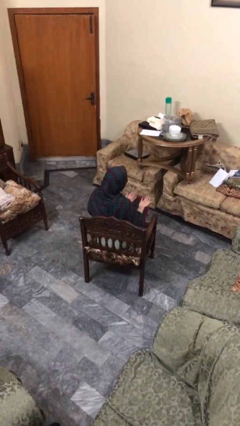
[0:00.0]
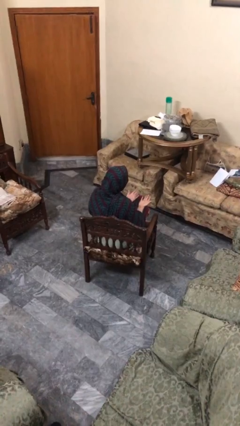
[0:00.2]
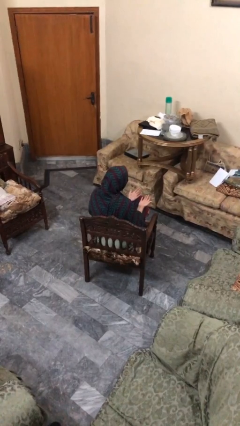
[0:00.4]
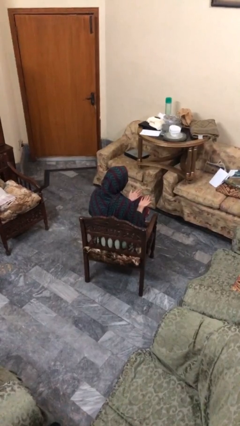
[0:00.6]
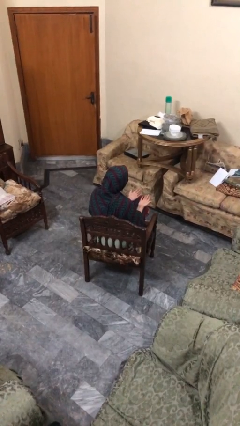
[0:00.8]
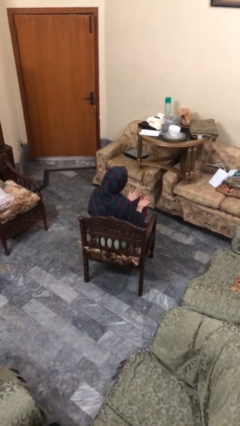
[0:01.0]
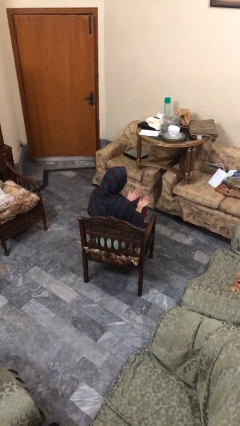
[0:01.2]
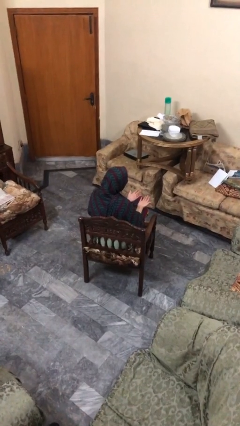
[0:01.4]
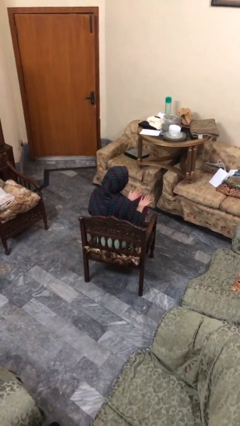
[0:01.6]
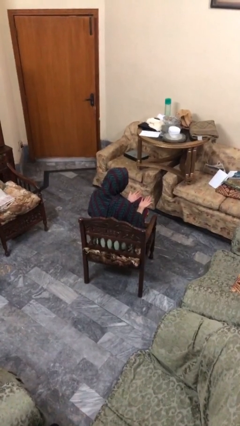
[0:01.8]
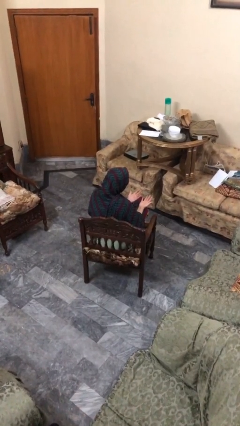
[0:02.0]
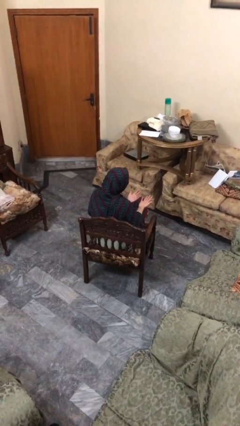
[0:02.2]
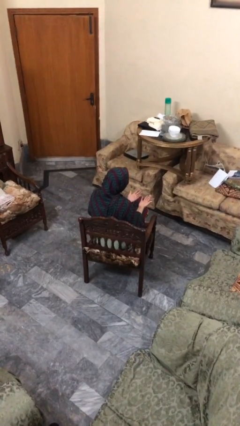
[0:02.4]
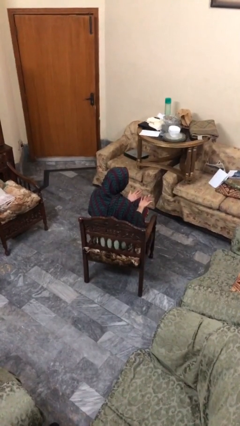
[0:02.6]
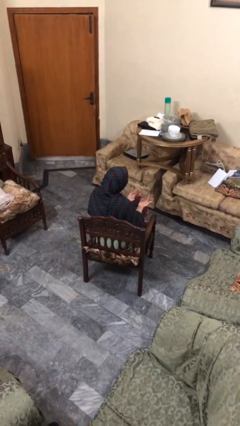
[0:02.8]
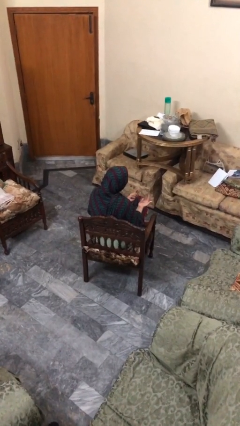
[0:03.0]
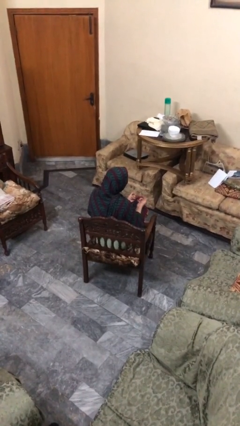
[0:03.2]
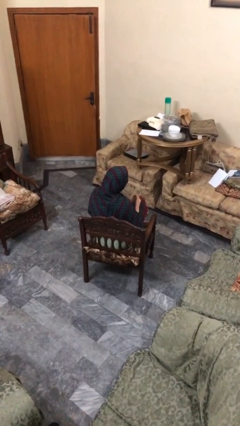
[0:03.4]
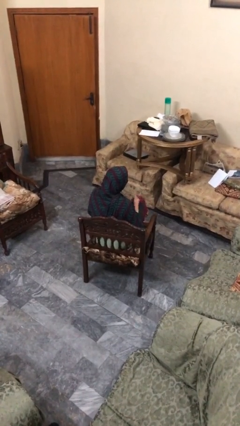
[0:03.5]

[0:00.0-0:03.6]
person looks at hands in lap

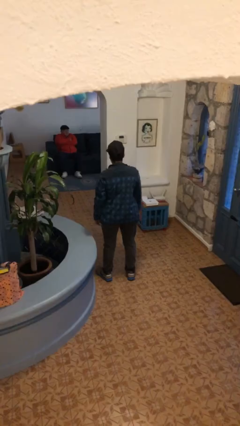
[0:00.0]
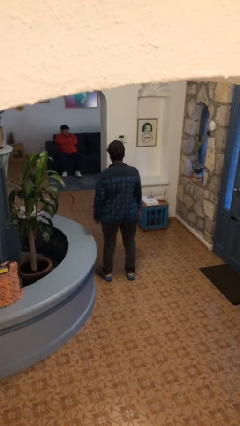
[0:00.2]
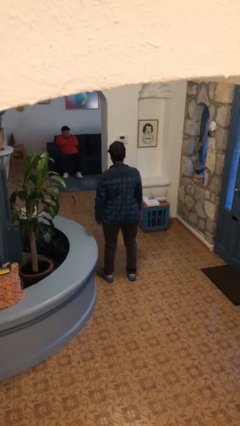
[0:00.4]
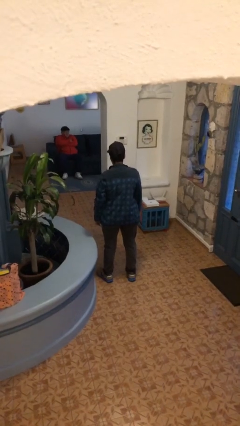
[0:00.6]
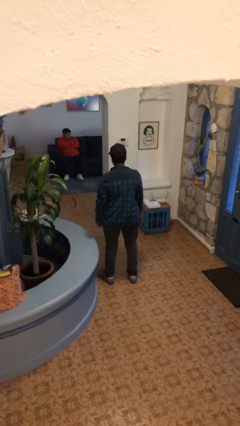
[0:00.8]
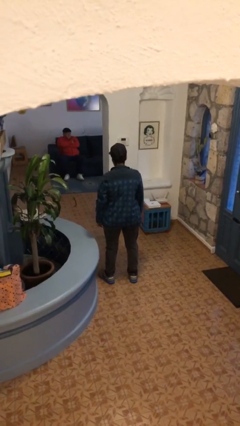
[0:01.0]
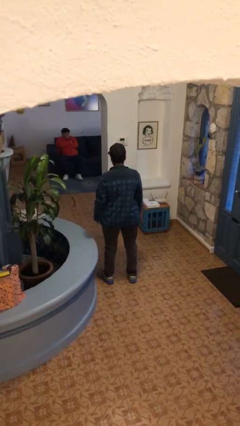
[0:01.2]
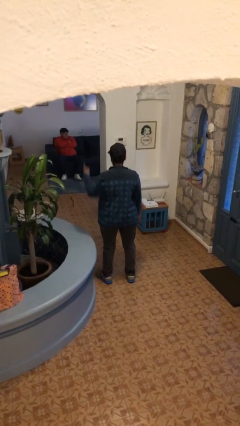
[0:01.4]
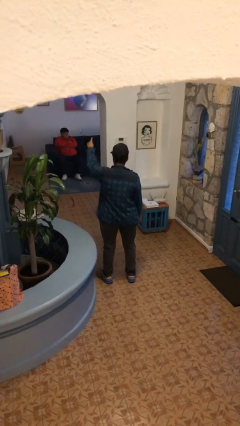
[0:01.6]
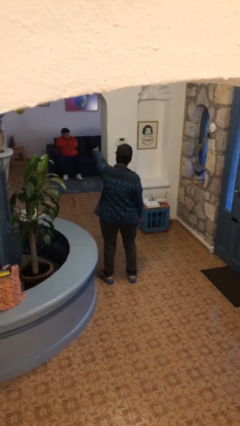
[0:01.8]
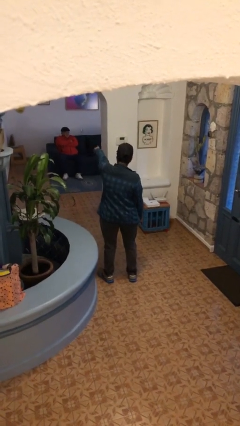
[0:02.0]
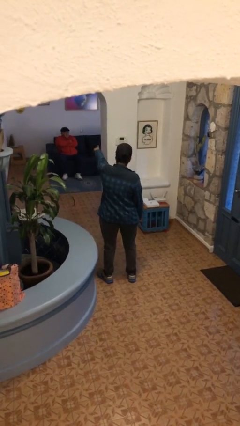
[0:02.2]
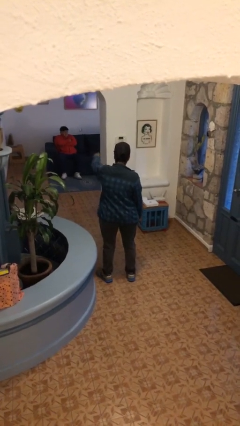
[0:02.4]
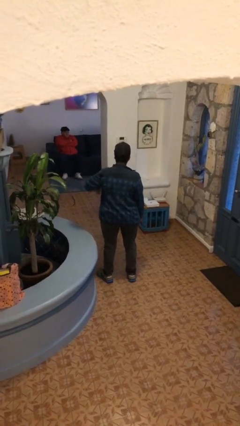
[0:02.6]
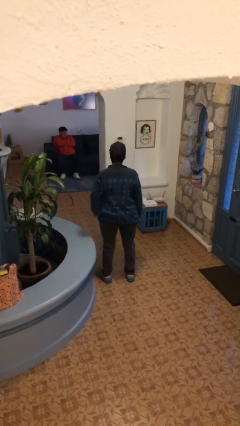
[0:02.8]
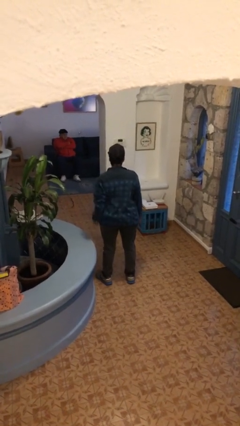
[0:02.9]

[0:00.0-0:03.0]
person points at person

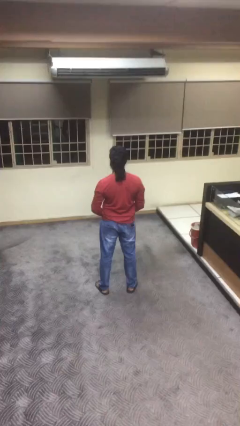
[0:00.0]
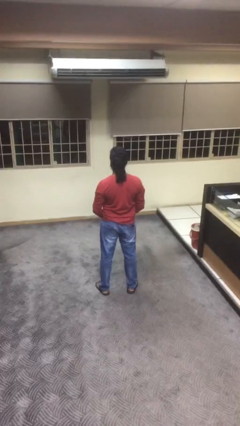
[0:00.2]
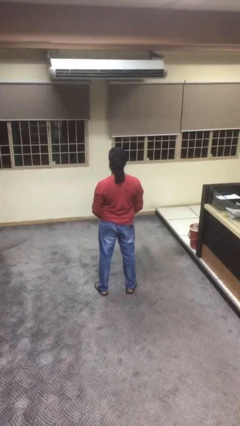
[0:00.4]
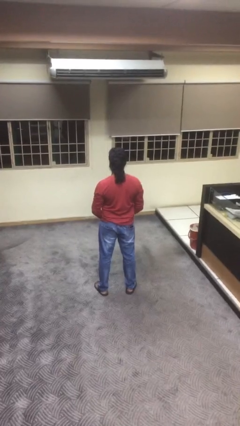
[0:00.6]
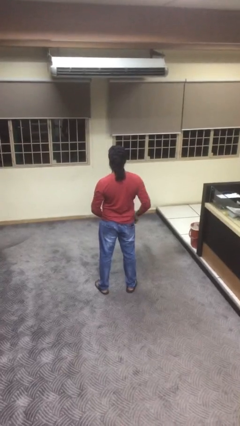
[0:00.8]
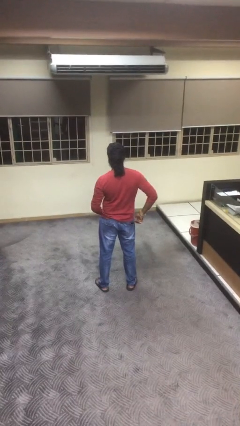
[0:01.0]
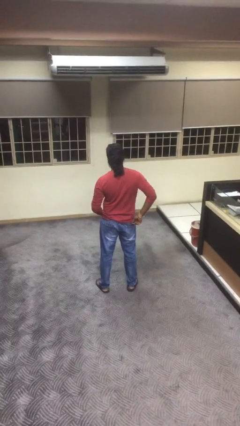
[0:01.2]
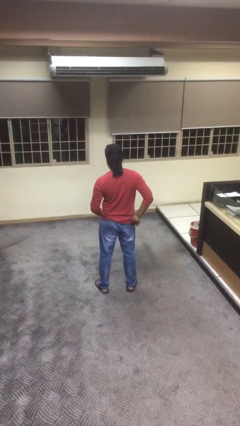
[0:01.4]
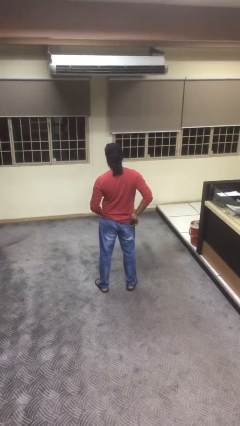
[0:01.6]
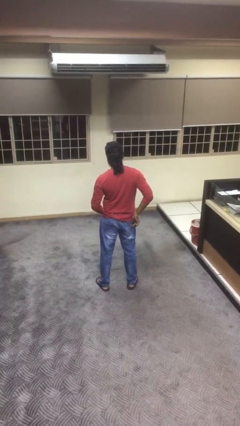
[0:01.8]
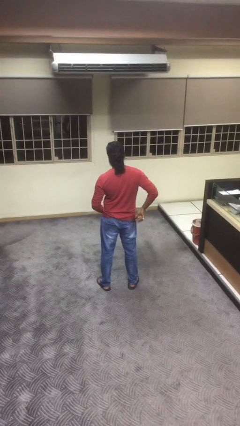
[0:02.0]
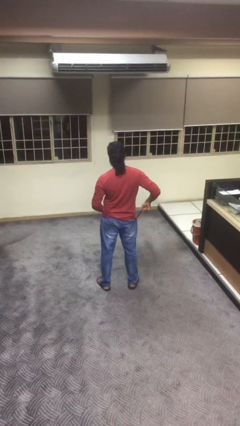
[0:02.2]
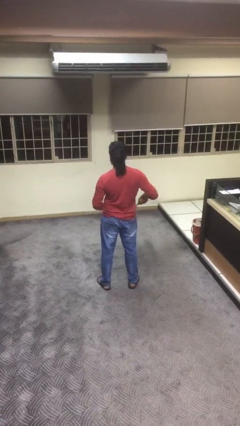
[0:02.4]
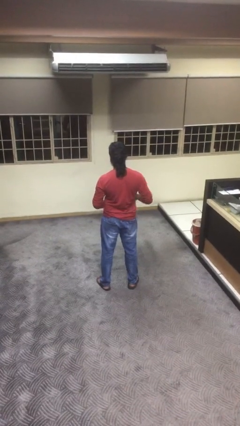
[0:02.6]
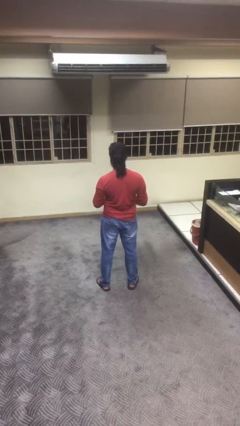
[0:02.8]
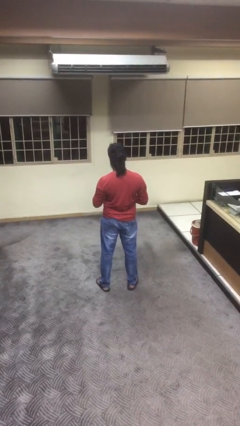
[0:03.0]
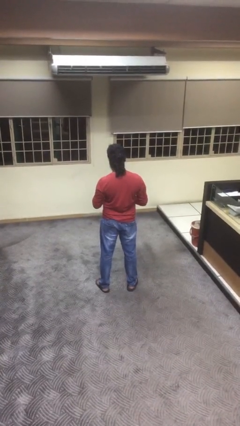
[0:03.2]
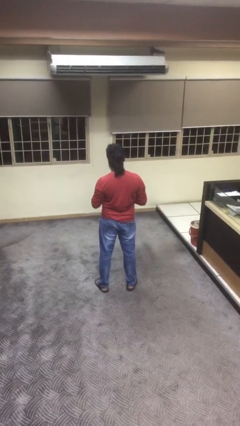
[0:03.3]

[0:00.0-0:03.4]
person takes phone from pocket

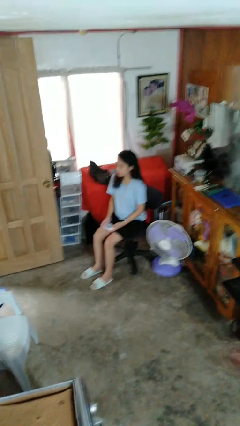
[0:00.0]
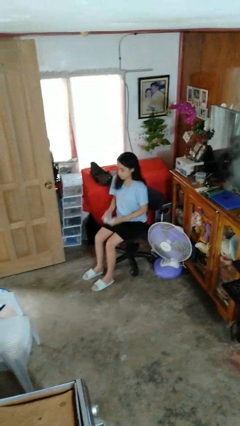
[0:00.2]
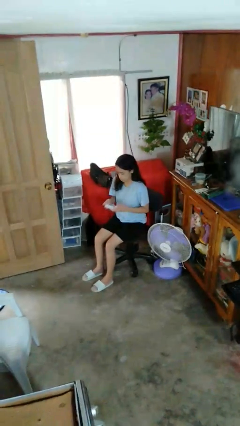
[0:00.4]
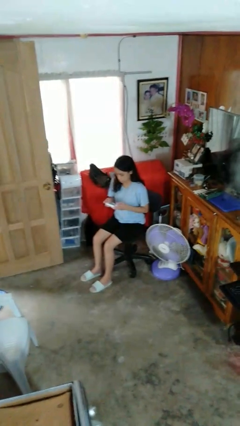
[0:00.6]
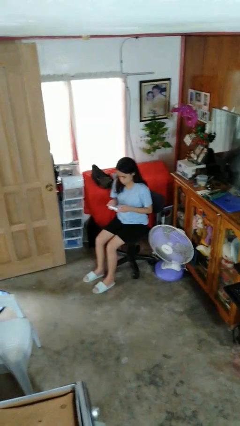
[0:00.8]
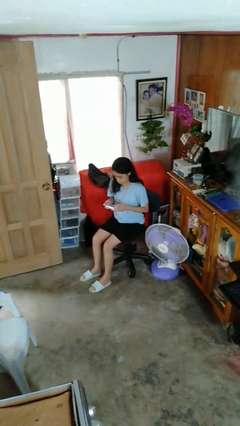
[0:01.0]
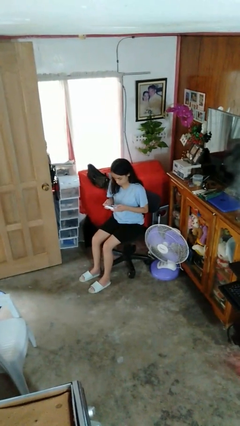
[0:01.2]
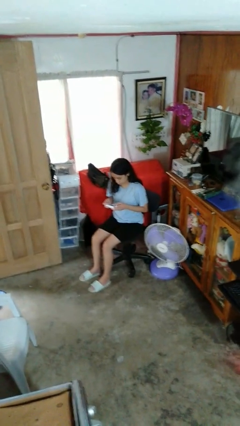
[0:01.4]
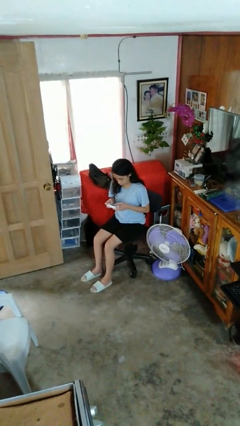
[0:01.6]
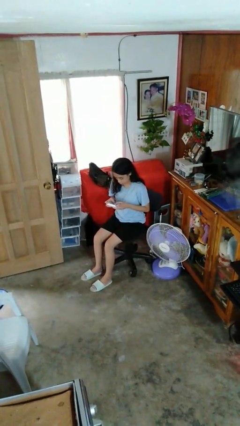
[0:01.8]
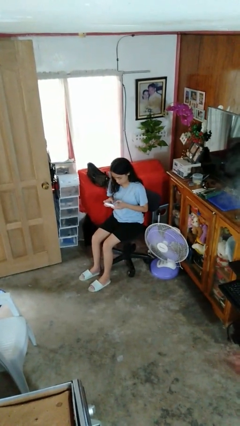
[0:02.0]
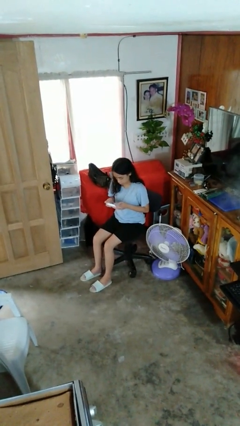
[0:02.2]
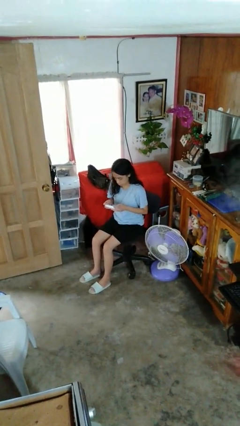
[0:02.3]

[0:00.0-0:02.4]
person interacts with handheld game

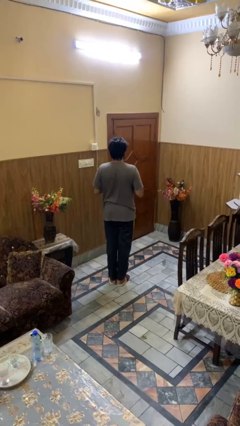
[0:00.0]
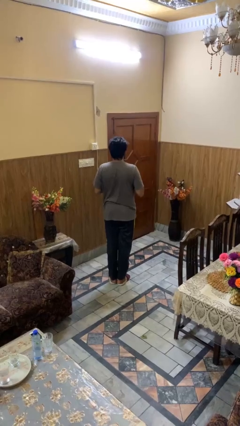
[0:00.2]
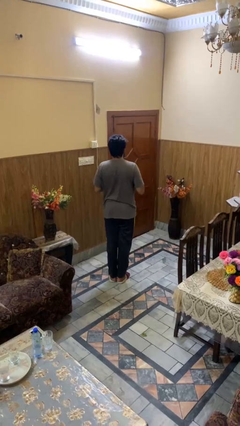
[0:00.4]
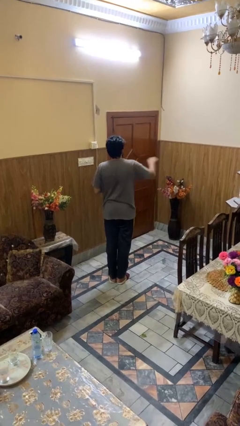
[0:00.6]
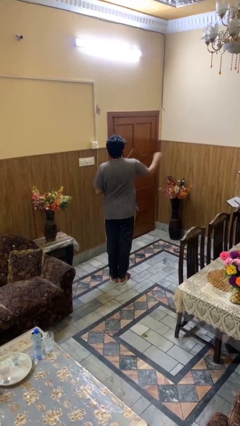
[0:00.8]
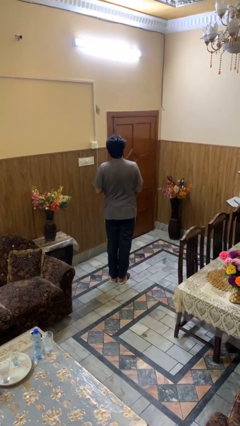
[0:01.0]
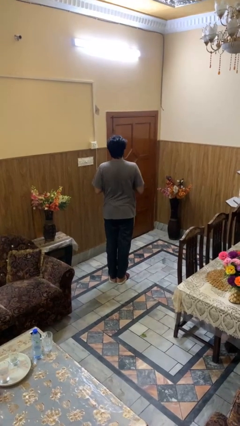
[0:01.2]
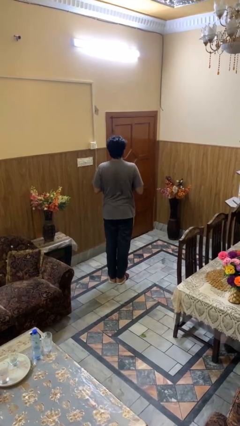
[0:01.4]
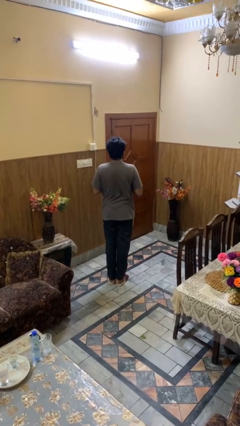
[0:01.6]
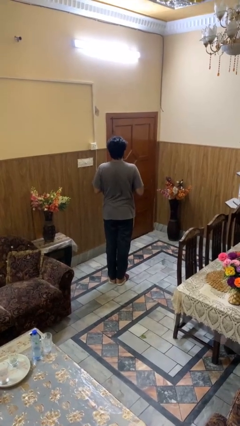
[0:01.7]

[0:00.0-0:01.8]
person karate chop

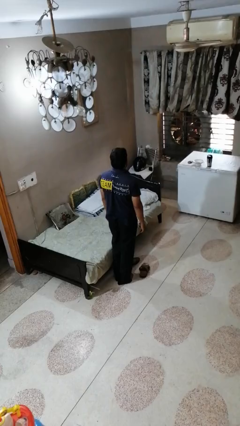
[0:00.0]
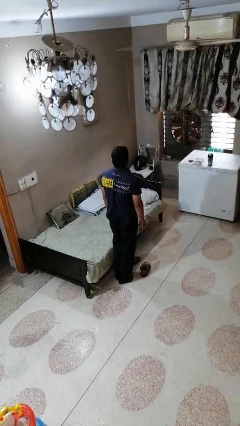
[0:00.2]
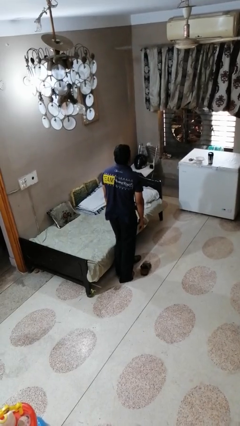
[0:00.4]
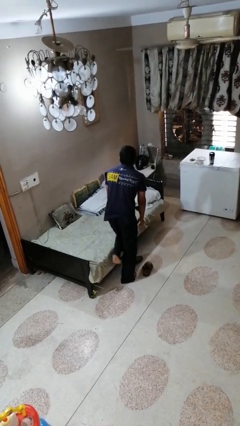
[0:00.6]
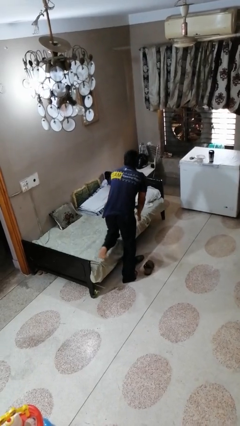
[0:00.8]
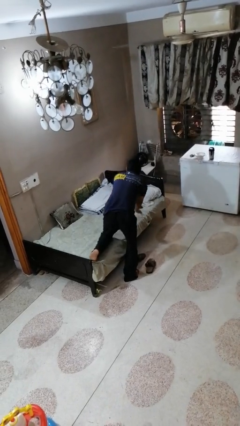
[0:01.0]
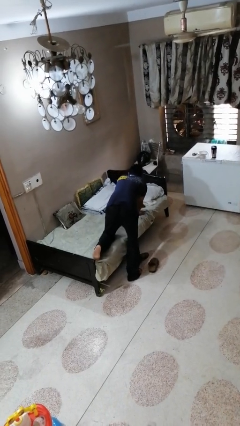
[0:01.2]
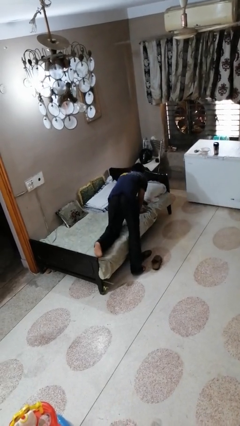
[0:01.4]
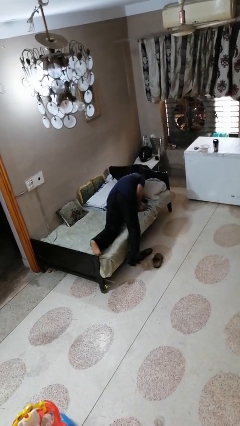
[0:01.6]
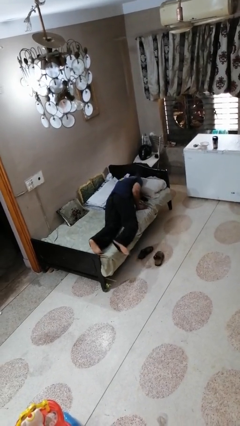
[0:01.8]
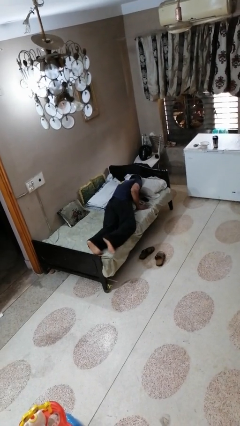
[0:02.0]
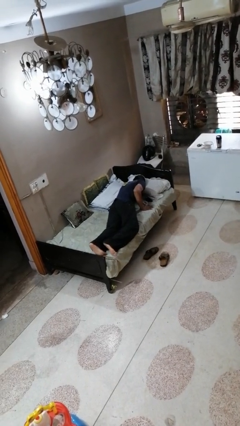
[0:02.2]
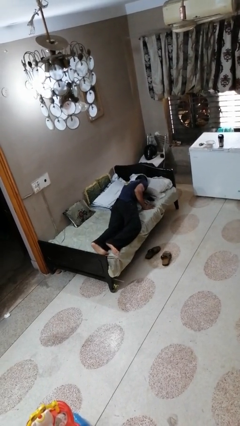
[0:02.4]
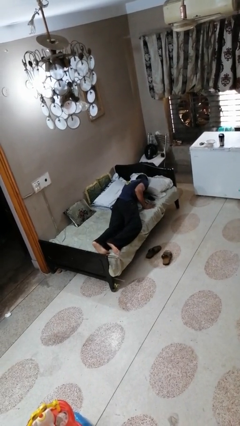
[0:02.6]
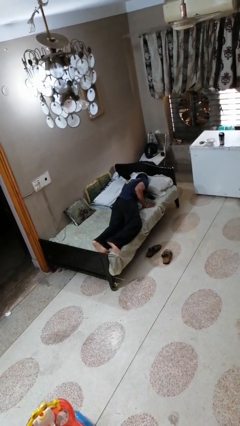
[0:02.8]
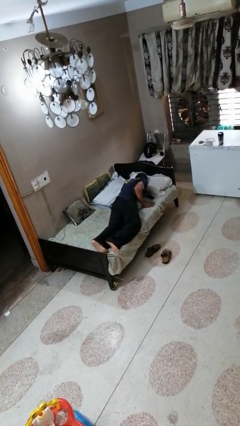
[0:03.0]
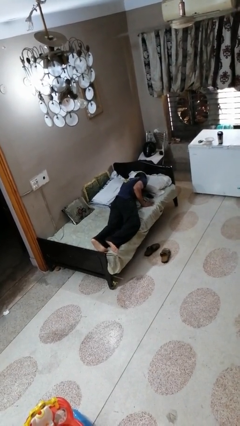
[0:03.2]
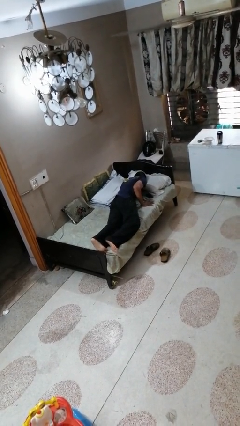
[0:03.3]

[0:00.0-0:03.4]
person lies down on bed
